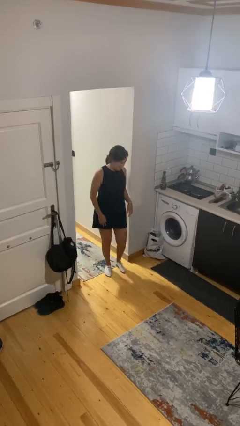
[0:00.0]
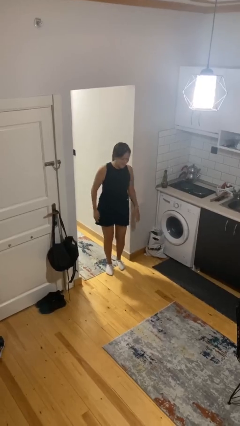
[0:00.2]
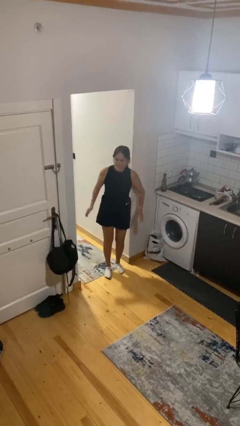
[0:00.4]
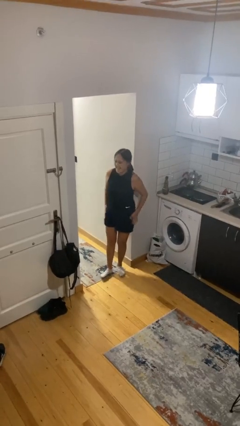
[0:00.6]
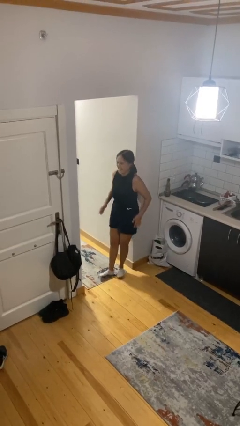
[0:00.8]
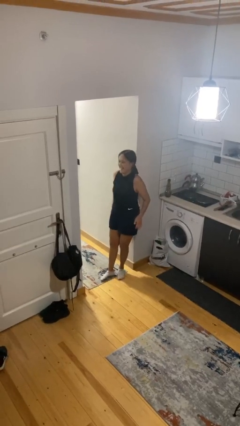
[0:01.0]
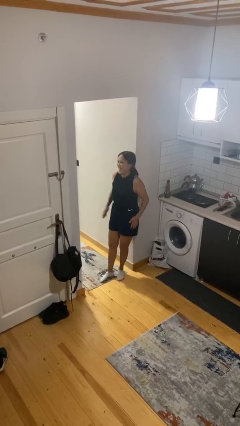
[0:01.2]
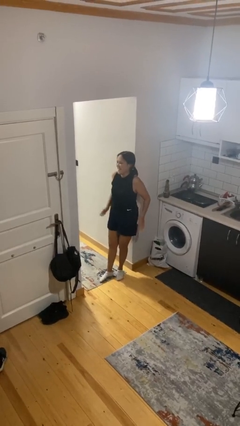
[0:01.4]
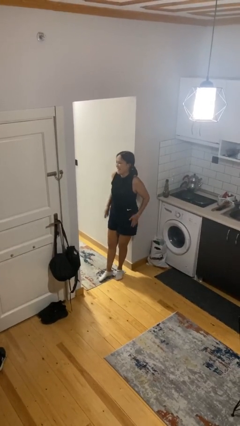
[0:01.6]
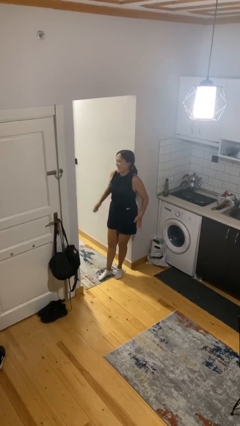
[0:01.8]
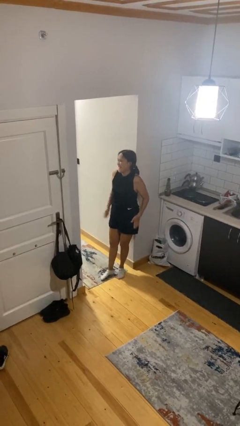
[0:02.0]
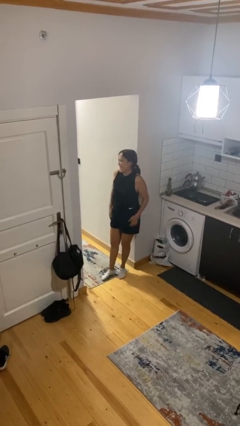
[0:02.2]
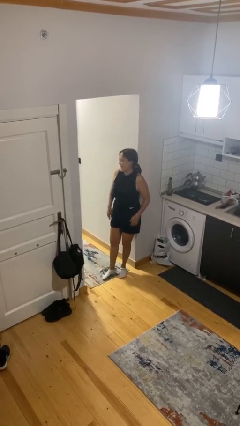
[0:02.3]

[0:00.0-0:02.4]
person slaps hands on thighs

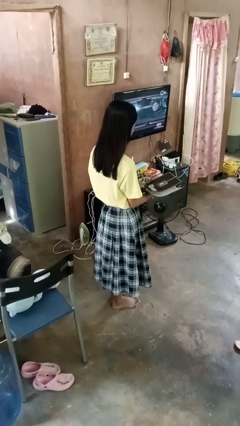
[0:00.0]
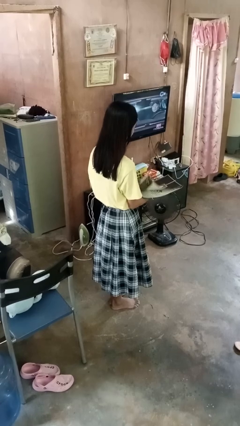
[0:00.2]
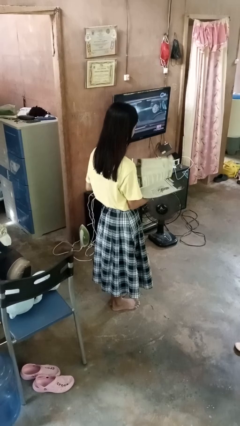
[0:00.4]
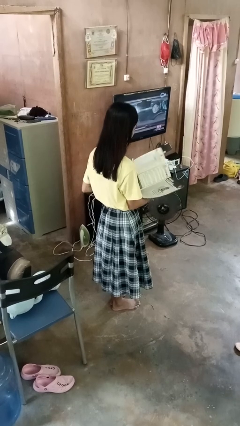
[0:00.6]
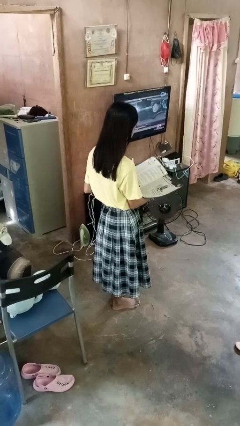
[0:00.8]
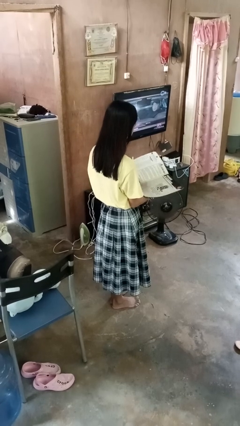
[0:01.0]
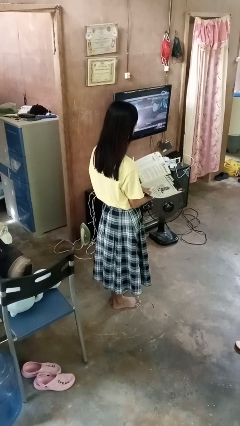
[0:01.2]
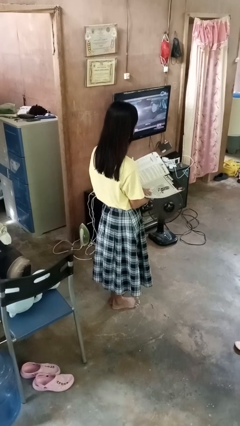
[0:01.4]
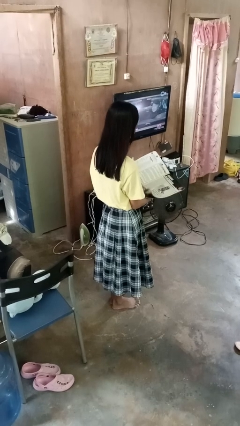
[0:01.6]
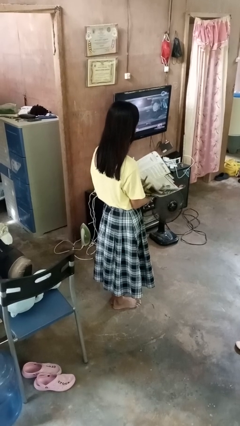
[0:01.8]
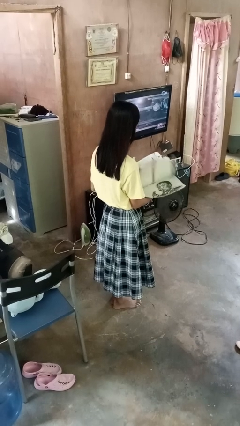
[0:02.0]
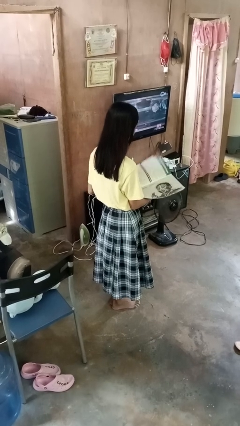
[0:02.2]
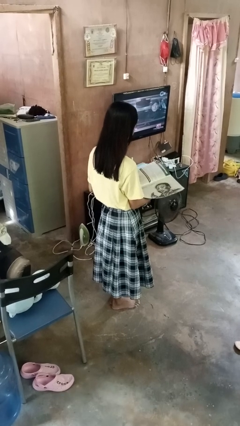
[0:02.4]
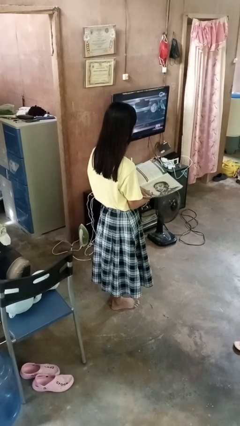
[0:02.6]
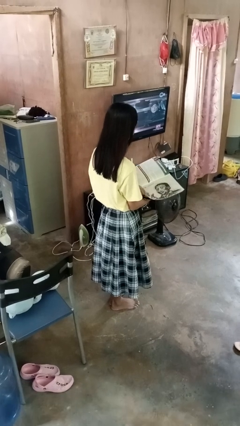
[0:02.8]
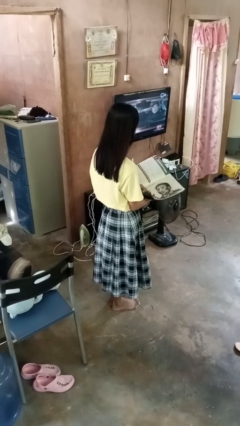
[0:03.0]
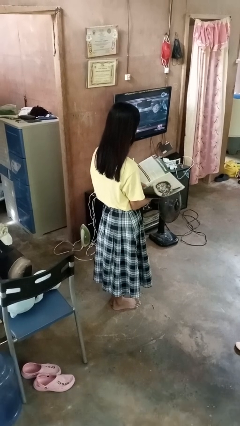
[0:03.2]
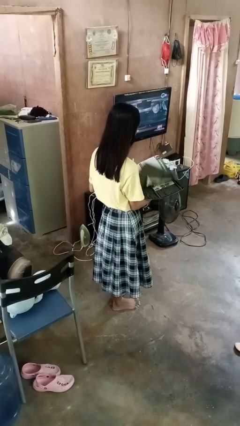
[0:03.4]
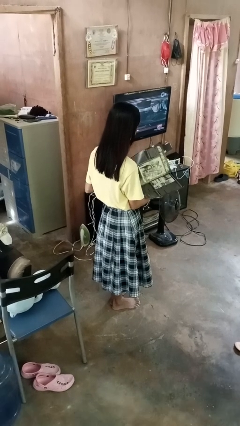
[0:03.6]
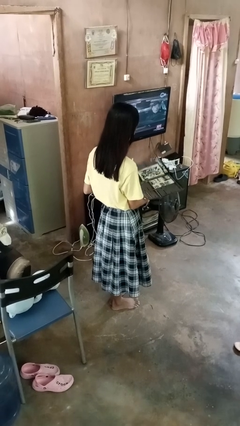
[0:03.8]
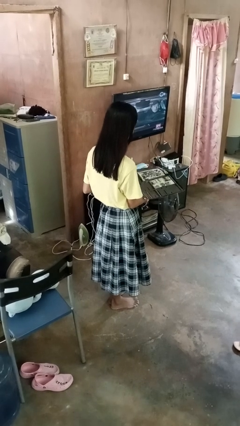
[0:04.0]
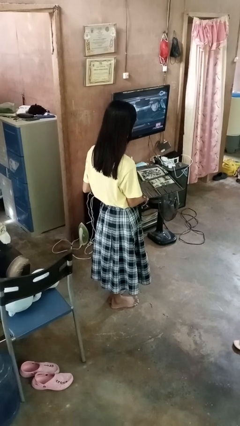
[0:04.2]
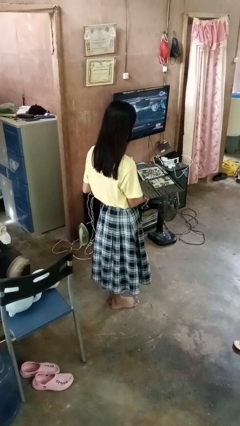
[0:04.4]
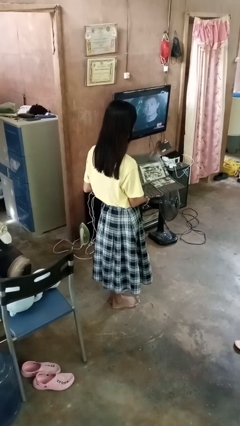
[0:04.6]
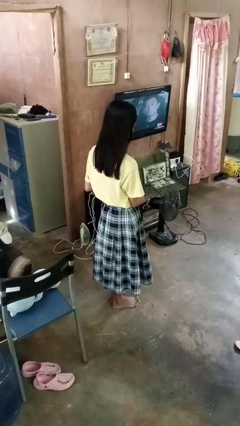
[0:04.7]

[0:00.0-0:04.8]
person reads magazine

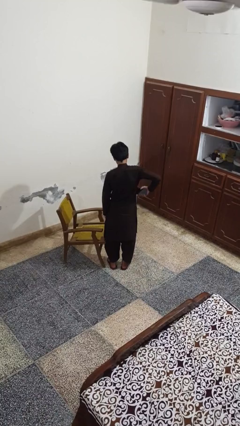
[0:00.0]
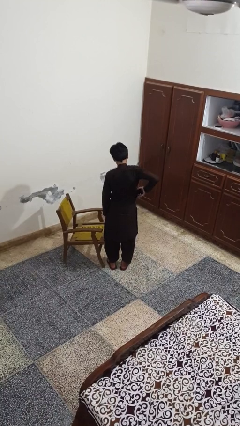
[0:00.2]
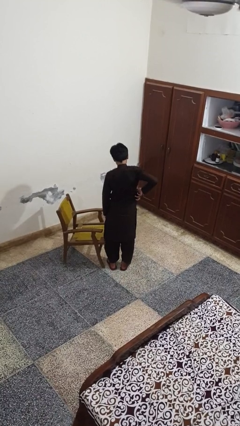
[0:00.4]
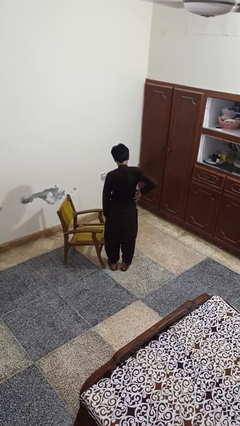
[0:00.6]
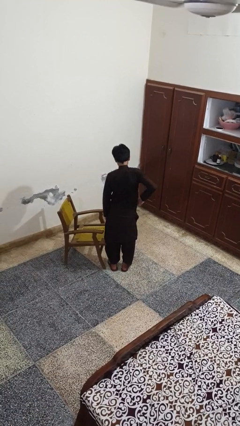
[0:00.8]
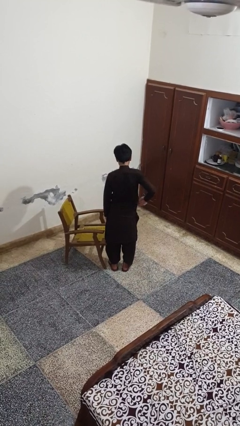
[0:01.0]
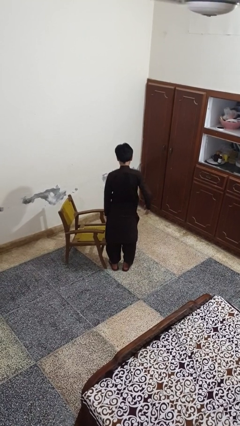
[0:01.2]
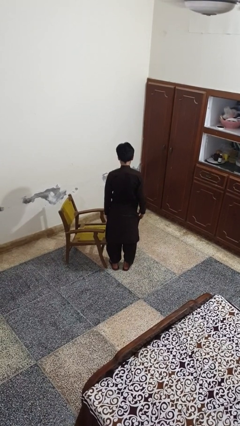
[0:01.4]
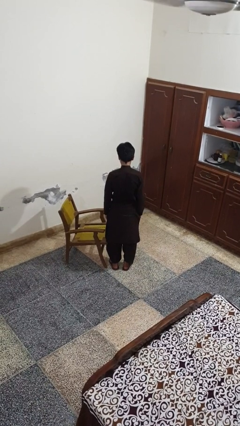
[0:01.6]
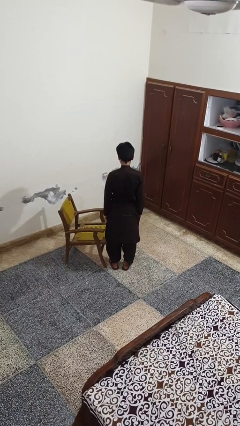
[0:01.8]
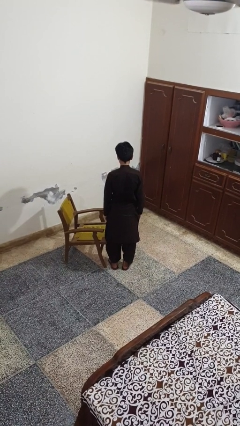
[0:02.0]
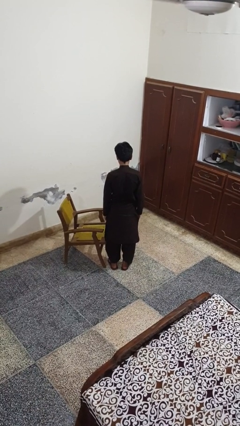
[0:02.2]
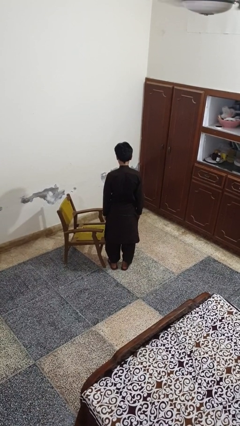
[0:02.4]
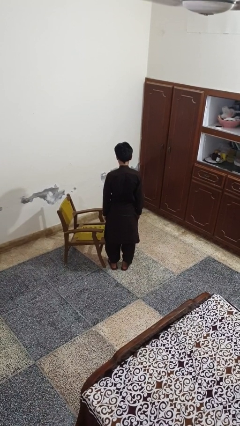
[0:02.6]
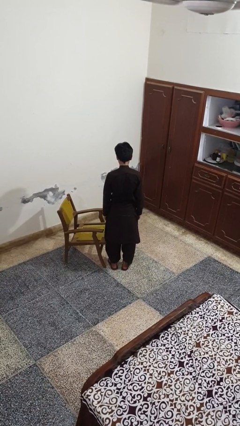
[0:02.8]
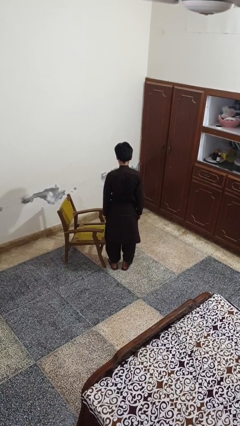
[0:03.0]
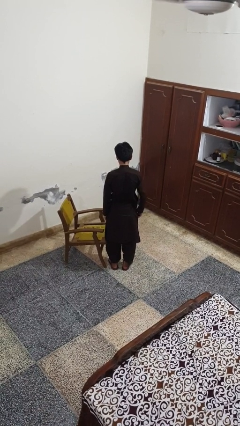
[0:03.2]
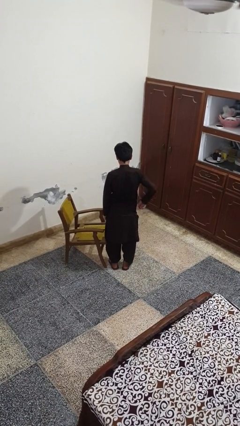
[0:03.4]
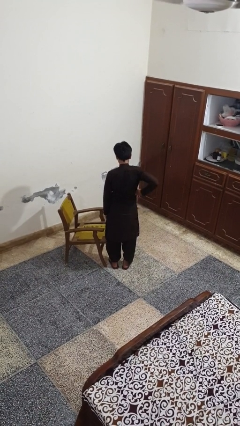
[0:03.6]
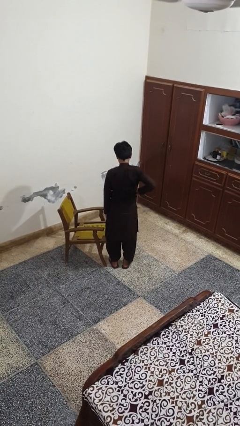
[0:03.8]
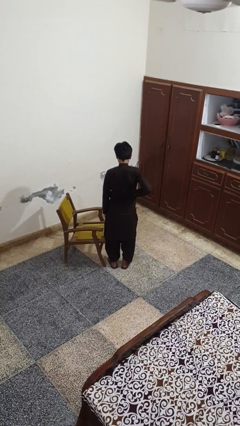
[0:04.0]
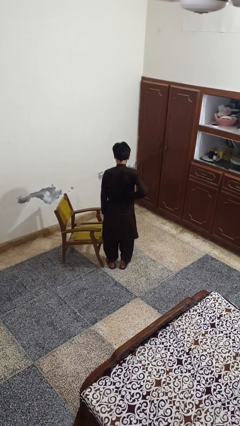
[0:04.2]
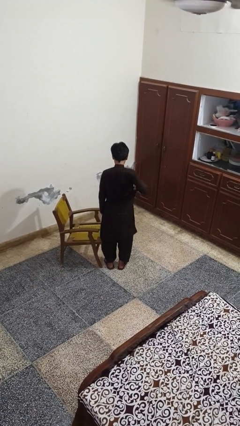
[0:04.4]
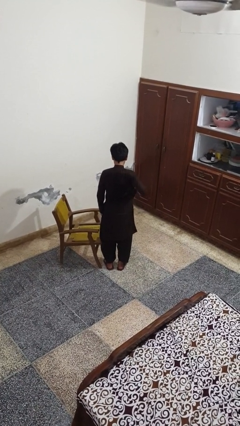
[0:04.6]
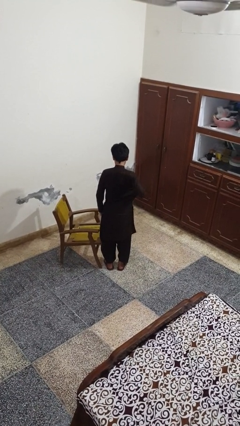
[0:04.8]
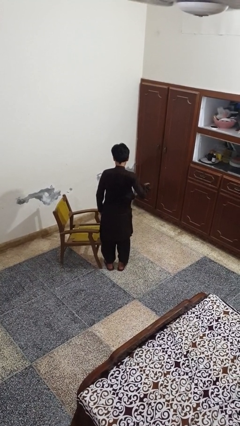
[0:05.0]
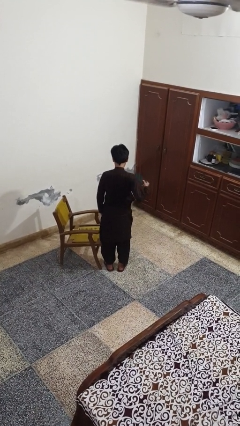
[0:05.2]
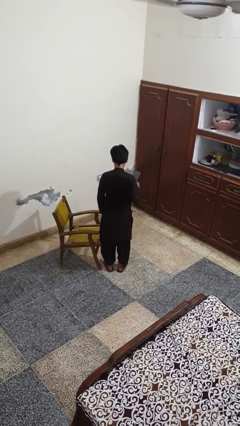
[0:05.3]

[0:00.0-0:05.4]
person puts phone into pocket

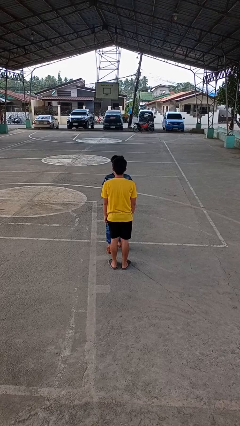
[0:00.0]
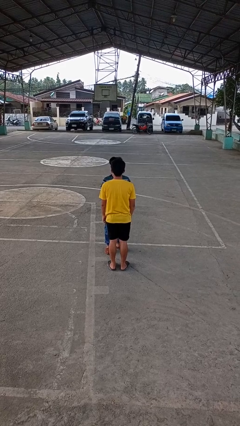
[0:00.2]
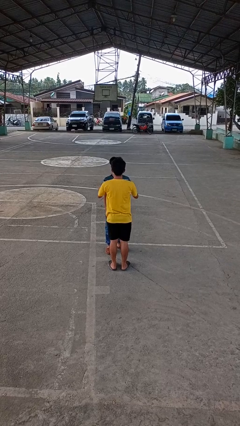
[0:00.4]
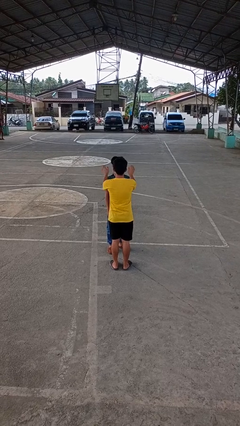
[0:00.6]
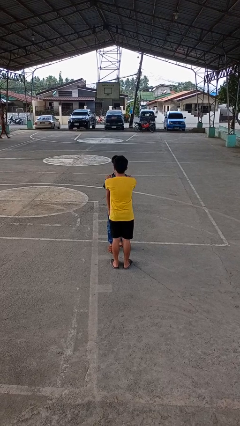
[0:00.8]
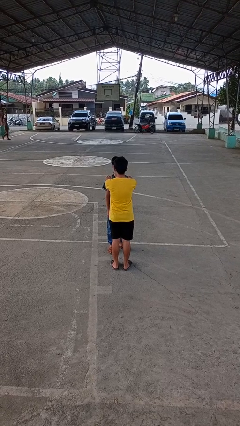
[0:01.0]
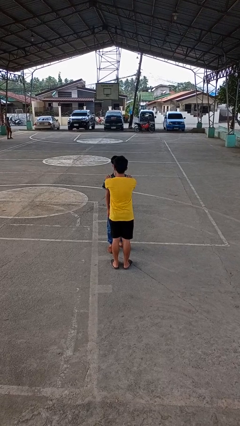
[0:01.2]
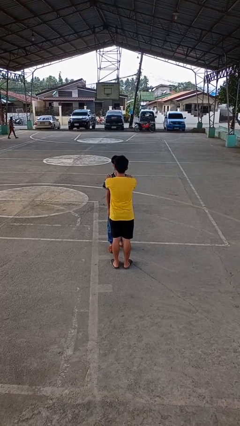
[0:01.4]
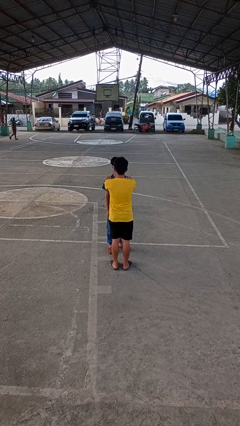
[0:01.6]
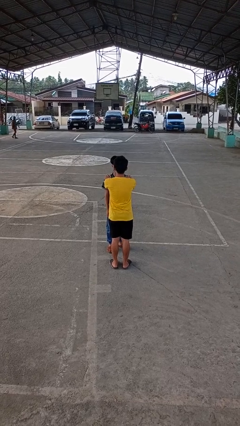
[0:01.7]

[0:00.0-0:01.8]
person grabs person by shoulder

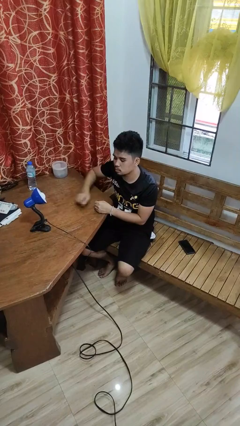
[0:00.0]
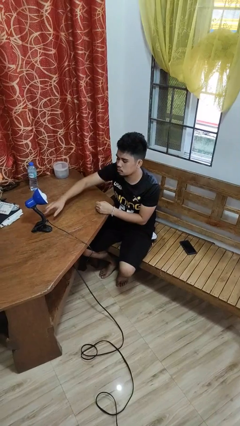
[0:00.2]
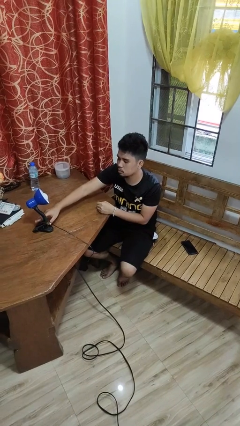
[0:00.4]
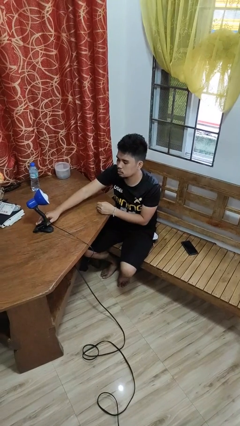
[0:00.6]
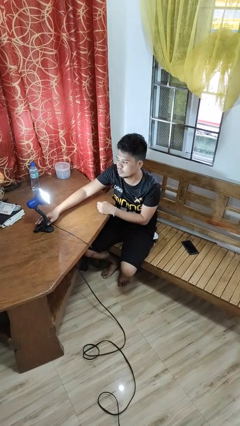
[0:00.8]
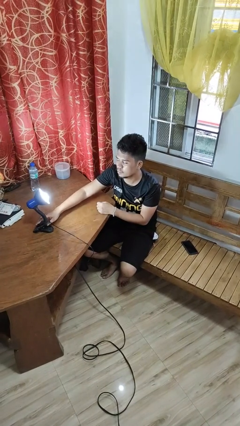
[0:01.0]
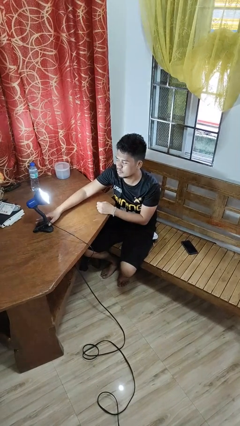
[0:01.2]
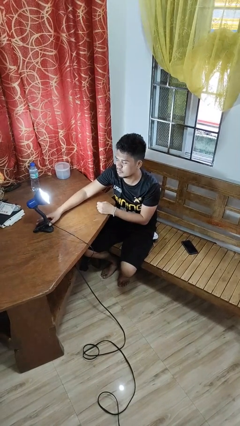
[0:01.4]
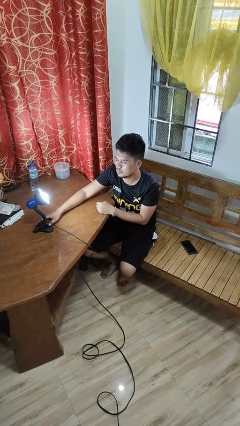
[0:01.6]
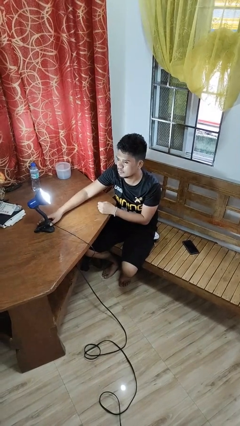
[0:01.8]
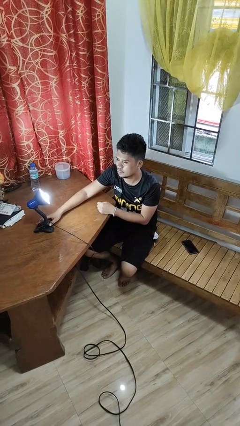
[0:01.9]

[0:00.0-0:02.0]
person turns on lamp

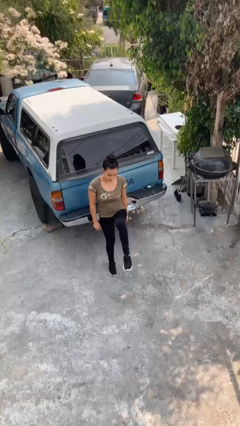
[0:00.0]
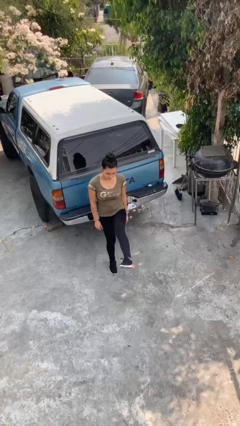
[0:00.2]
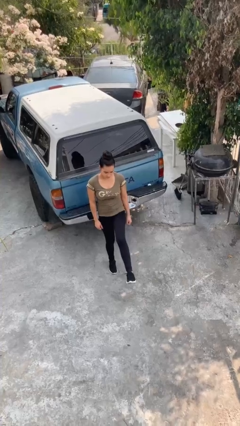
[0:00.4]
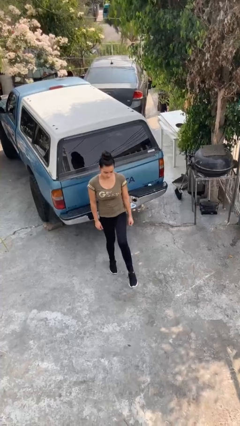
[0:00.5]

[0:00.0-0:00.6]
person karate kicks

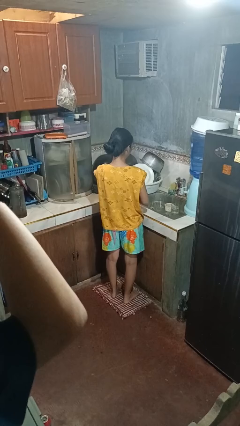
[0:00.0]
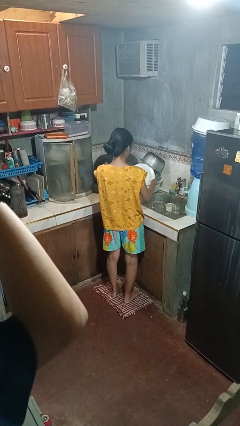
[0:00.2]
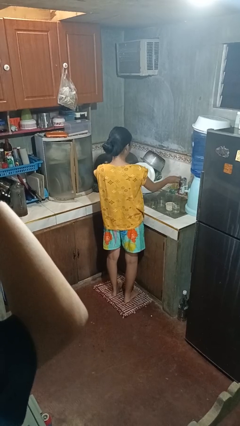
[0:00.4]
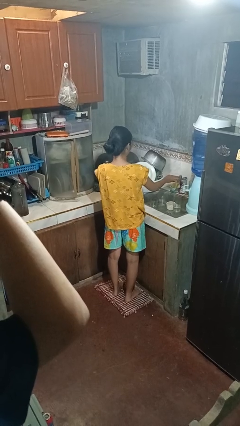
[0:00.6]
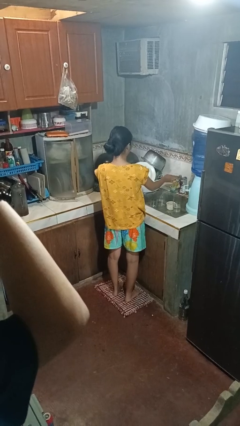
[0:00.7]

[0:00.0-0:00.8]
person turns off faucet
